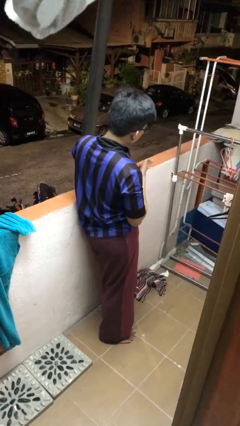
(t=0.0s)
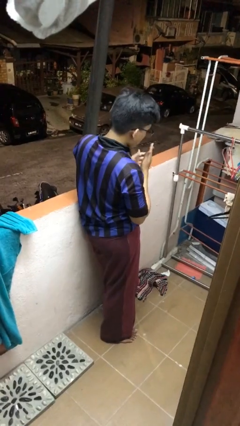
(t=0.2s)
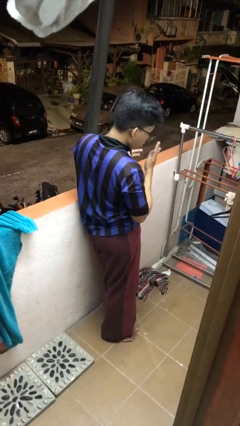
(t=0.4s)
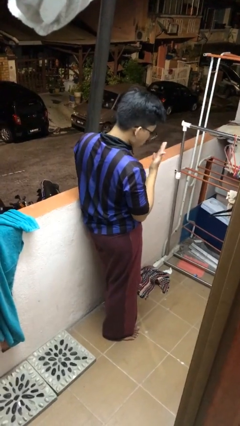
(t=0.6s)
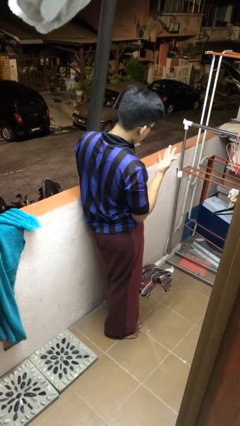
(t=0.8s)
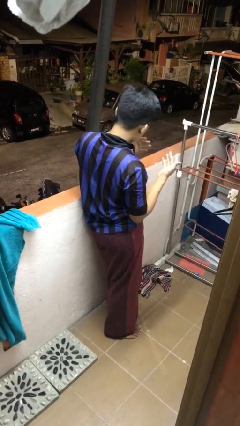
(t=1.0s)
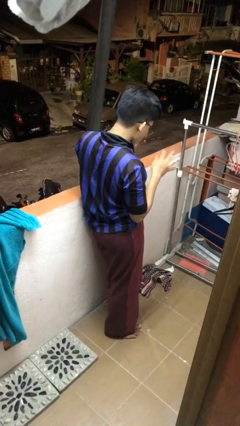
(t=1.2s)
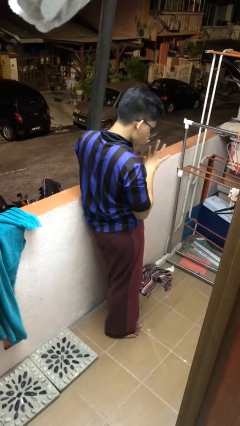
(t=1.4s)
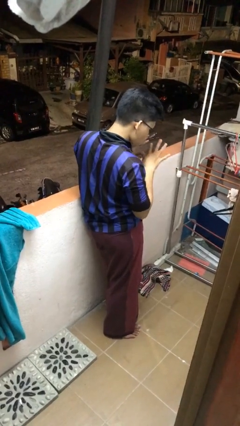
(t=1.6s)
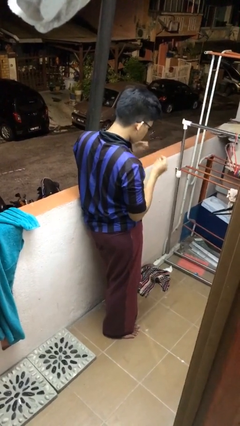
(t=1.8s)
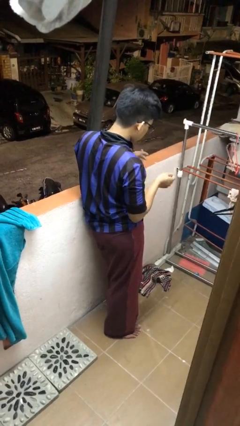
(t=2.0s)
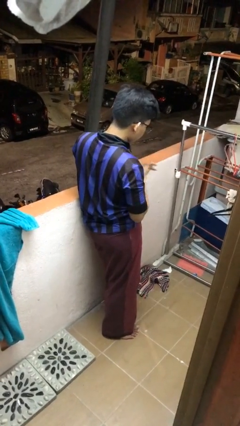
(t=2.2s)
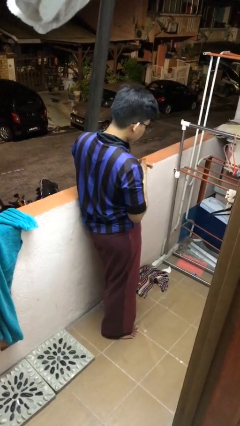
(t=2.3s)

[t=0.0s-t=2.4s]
person blows into hands

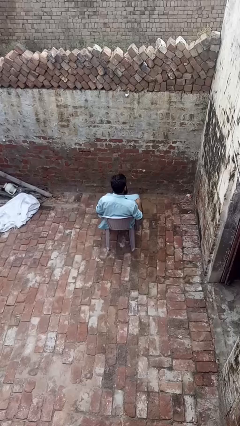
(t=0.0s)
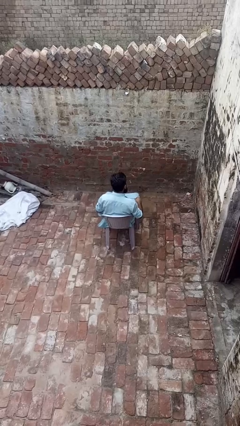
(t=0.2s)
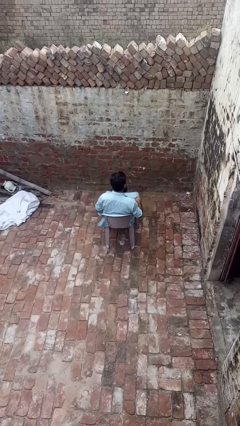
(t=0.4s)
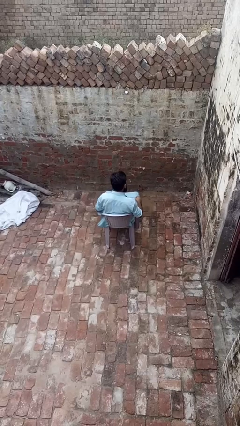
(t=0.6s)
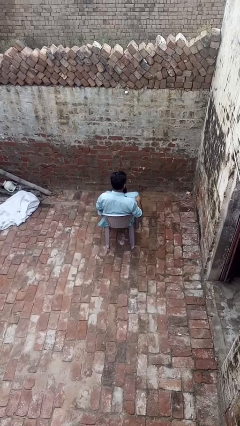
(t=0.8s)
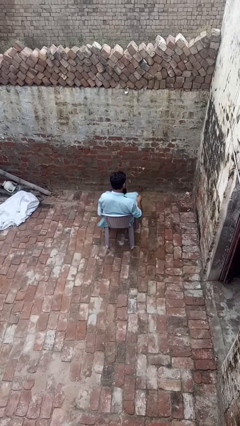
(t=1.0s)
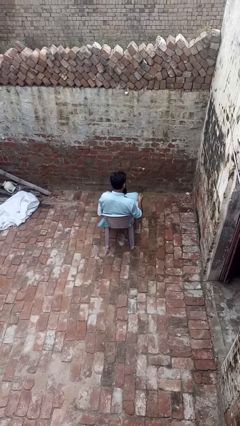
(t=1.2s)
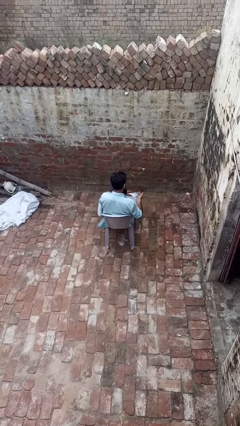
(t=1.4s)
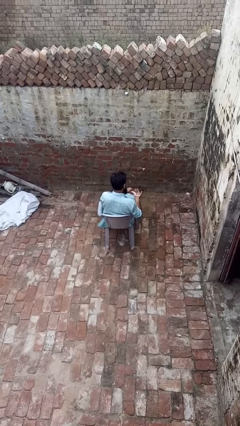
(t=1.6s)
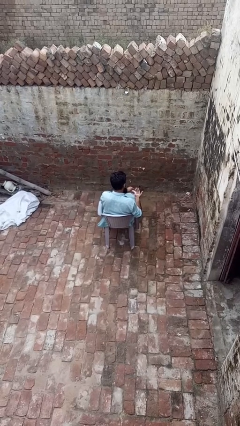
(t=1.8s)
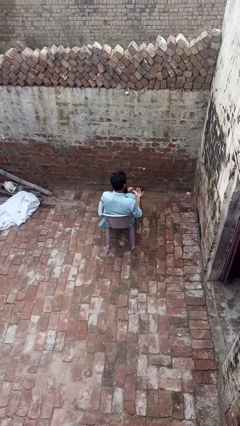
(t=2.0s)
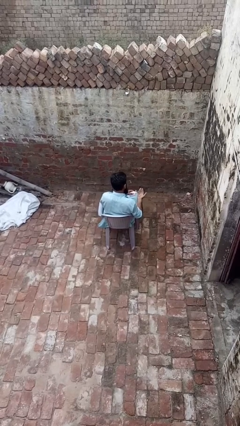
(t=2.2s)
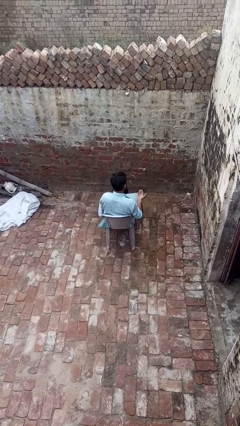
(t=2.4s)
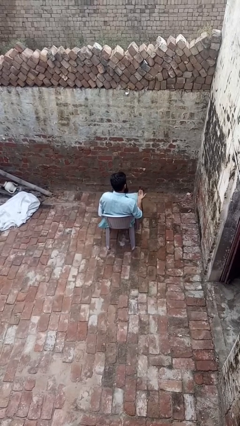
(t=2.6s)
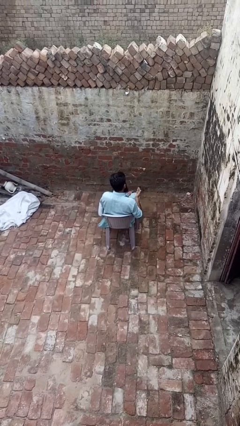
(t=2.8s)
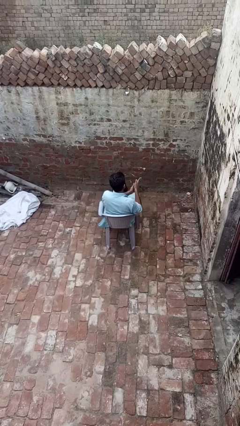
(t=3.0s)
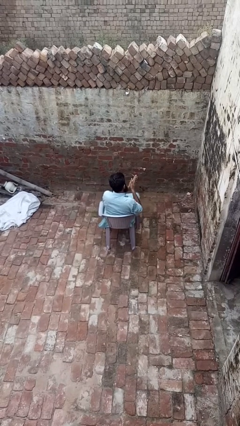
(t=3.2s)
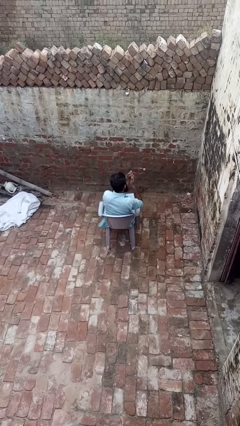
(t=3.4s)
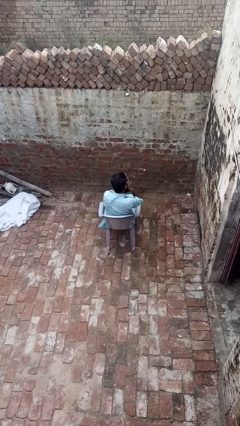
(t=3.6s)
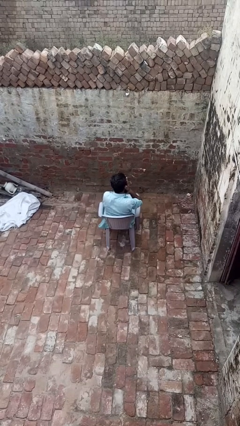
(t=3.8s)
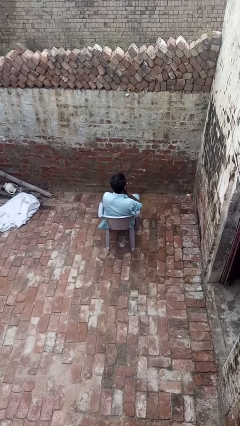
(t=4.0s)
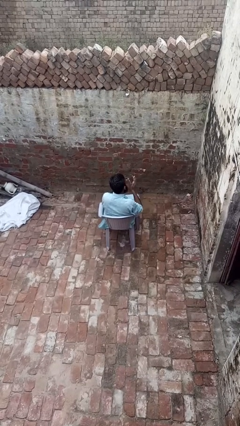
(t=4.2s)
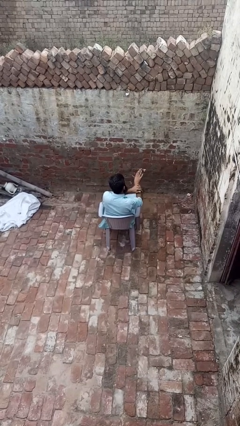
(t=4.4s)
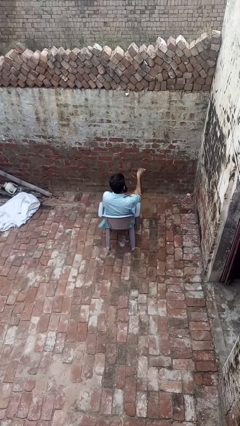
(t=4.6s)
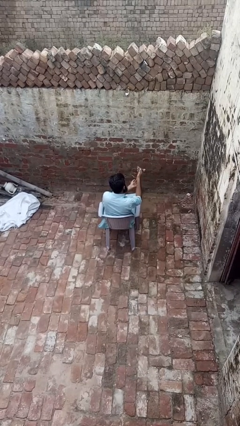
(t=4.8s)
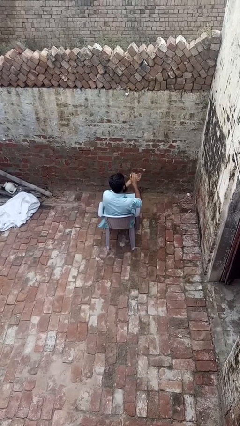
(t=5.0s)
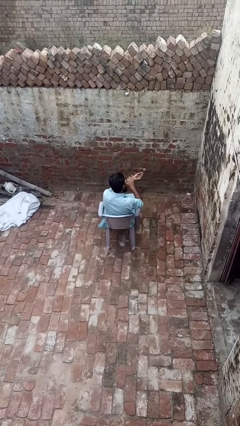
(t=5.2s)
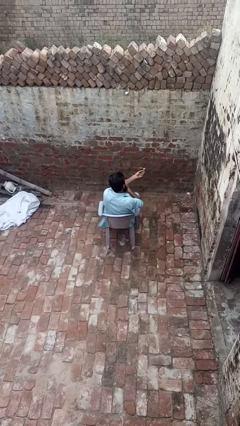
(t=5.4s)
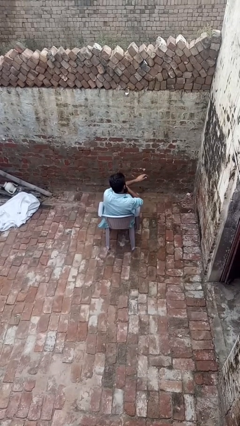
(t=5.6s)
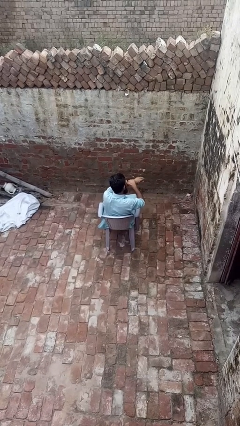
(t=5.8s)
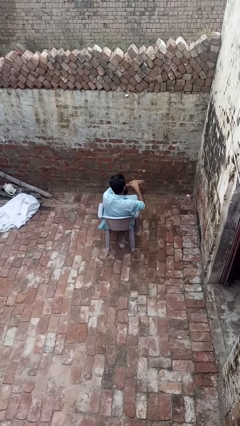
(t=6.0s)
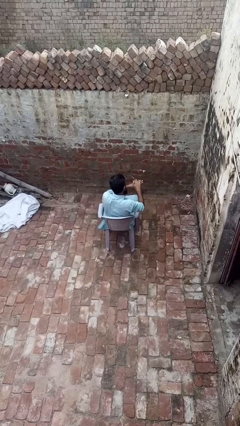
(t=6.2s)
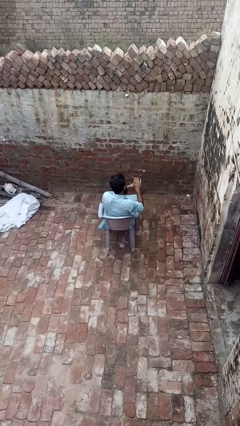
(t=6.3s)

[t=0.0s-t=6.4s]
person applies sunscreen

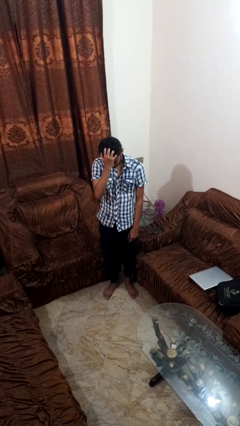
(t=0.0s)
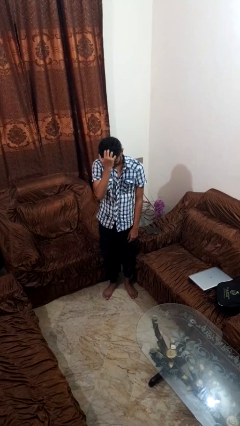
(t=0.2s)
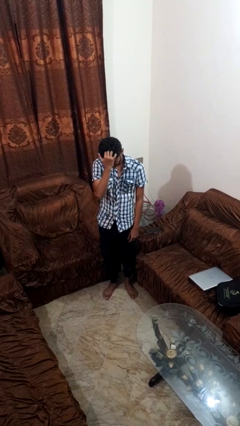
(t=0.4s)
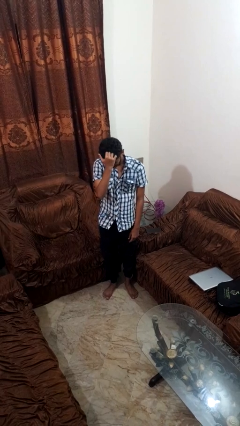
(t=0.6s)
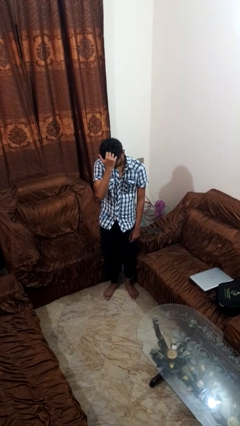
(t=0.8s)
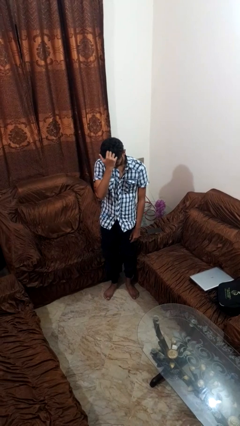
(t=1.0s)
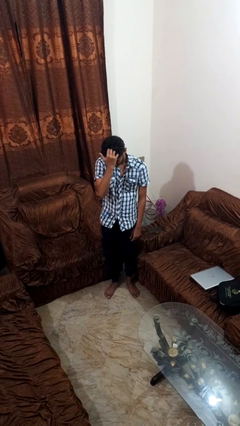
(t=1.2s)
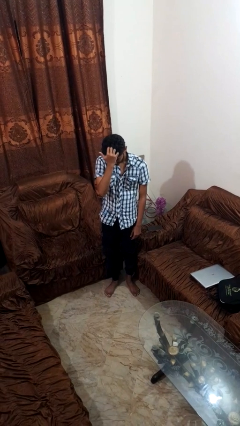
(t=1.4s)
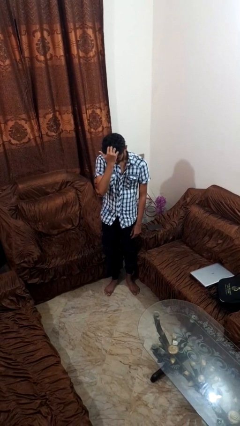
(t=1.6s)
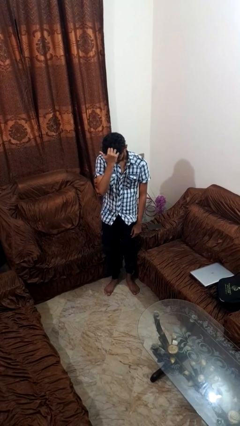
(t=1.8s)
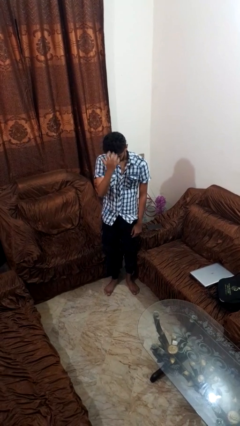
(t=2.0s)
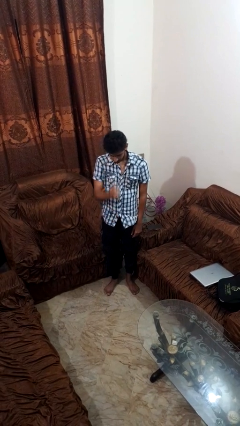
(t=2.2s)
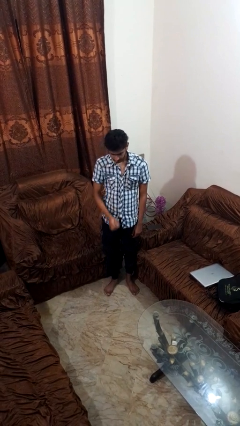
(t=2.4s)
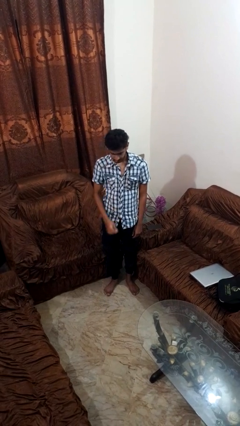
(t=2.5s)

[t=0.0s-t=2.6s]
person scratches face

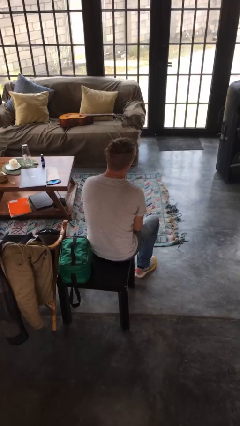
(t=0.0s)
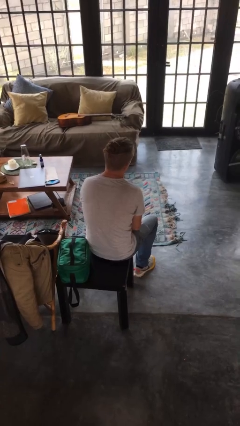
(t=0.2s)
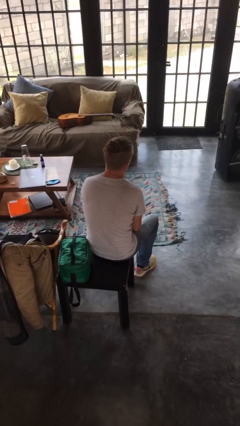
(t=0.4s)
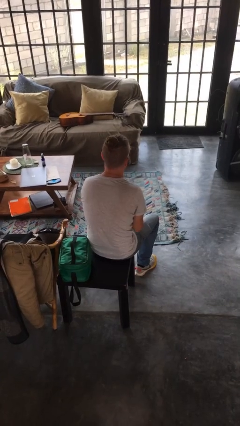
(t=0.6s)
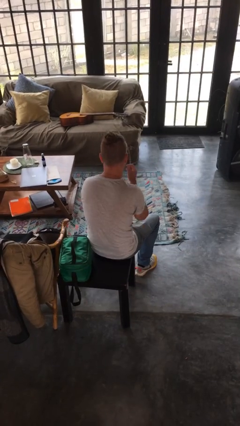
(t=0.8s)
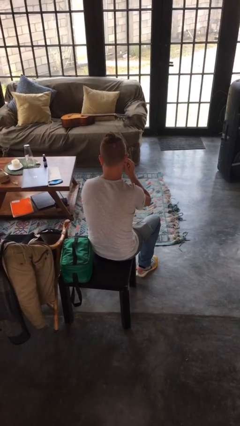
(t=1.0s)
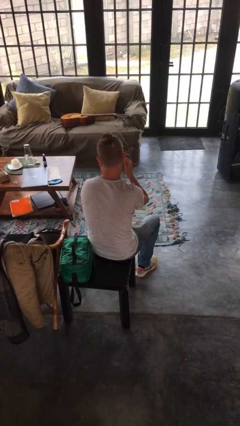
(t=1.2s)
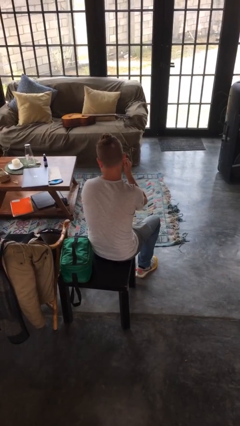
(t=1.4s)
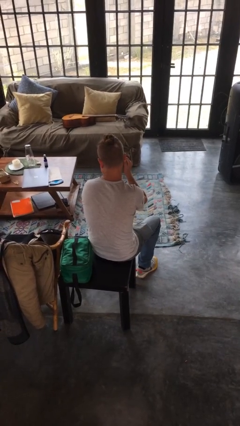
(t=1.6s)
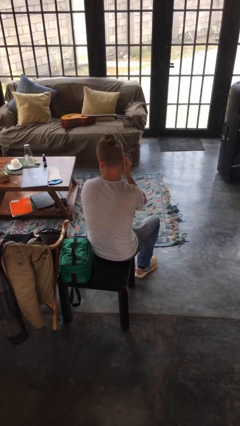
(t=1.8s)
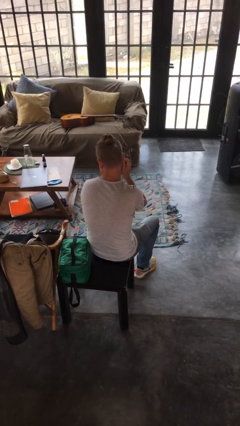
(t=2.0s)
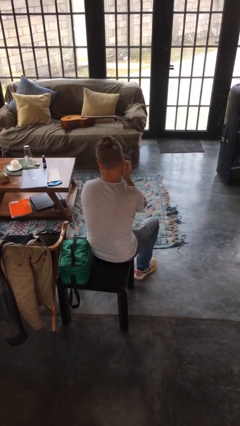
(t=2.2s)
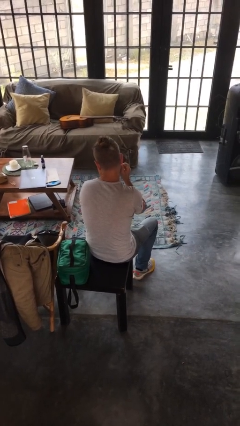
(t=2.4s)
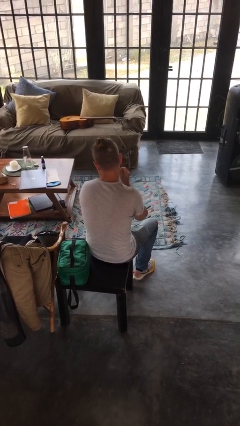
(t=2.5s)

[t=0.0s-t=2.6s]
person touches earlobe

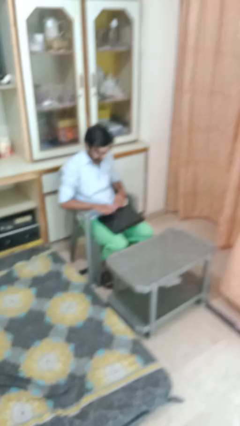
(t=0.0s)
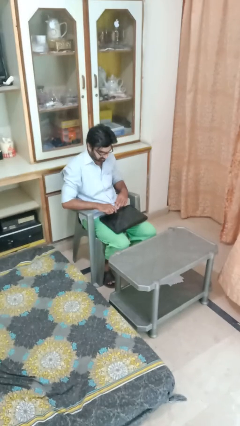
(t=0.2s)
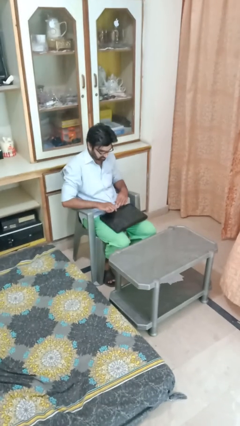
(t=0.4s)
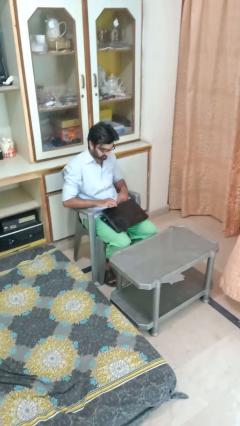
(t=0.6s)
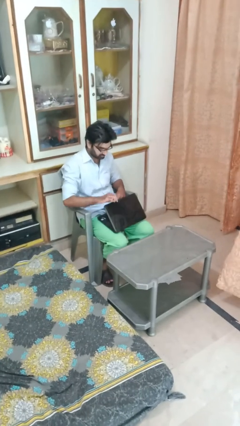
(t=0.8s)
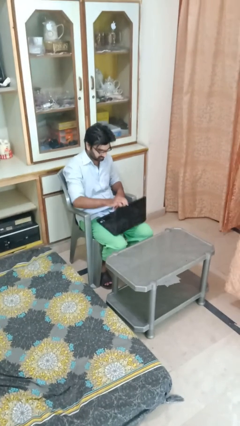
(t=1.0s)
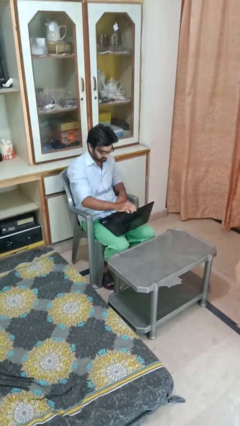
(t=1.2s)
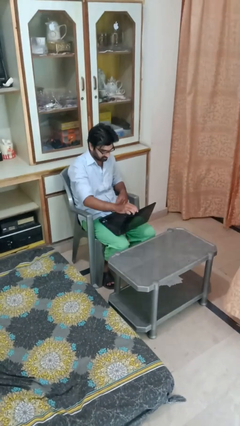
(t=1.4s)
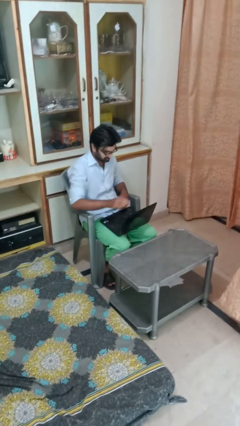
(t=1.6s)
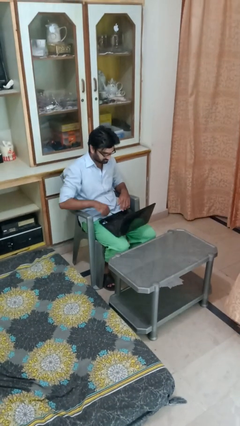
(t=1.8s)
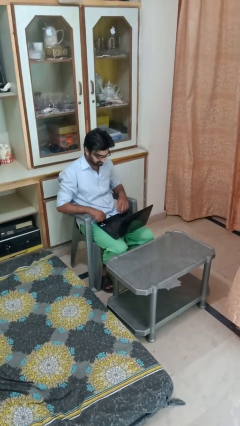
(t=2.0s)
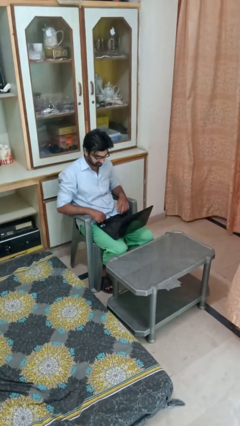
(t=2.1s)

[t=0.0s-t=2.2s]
person opens laptop

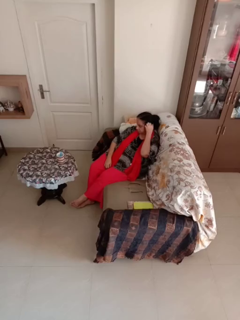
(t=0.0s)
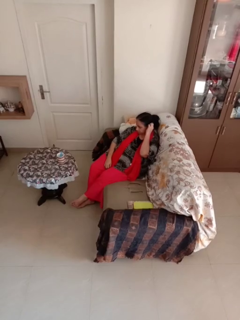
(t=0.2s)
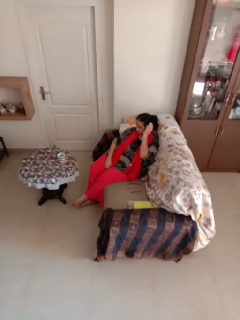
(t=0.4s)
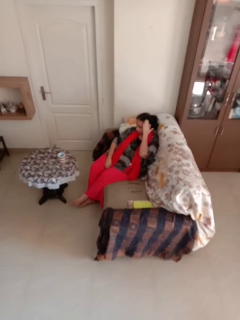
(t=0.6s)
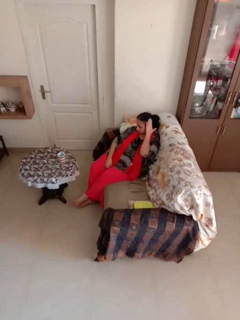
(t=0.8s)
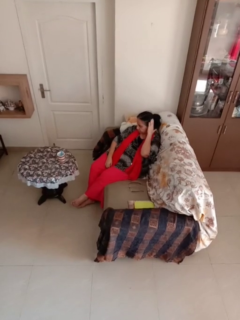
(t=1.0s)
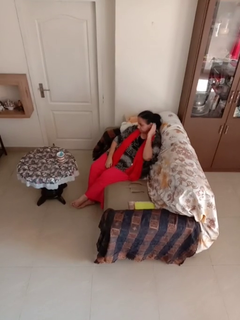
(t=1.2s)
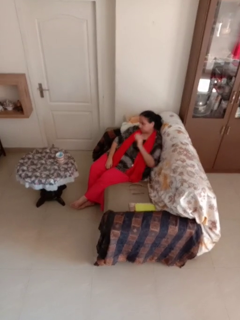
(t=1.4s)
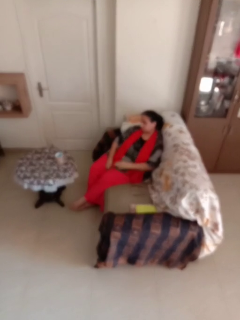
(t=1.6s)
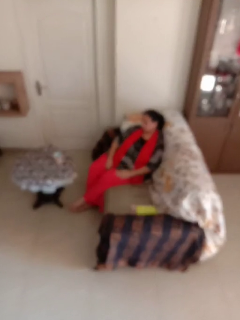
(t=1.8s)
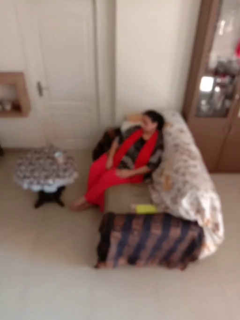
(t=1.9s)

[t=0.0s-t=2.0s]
person strokes hair
